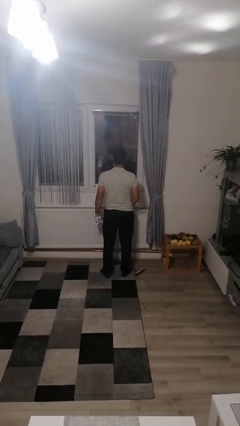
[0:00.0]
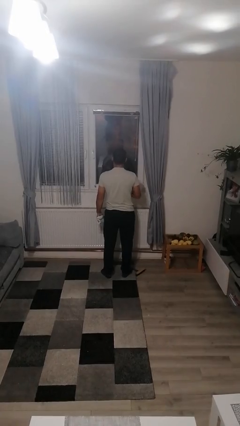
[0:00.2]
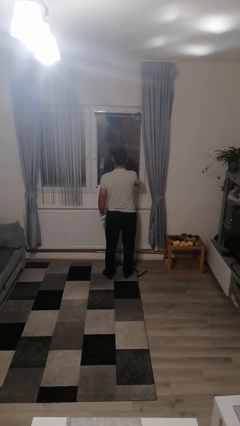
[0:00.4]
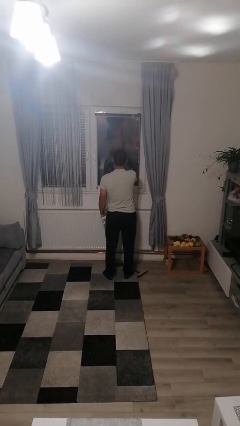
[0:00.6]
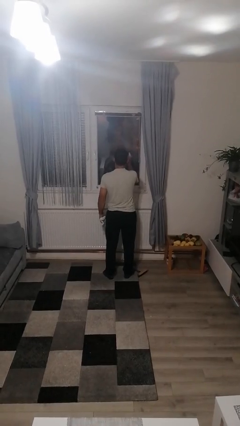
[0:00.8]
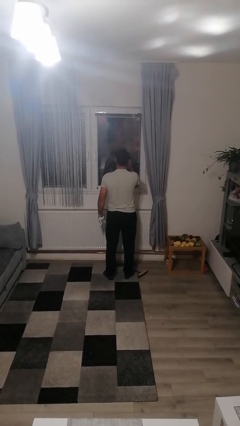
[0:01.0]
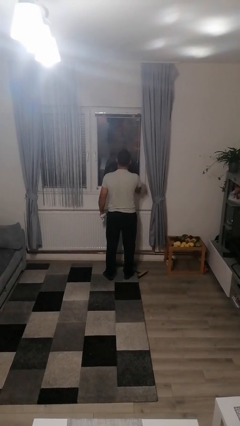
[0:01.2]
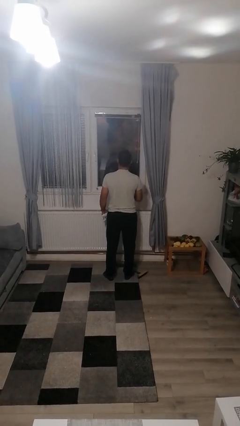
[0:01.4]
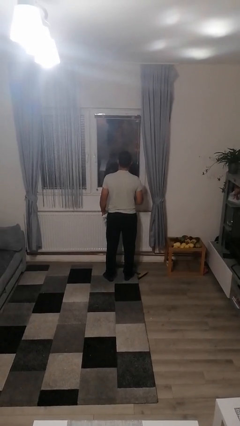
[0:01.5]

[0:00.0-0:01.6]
person sprays from bottle

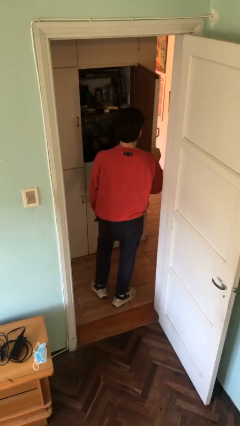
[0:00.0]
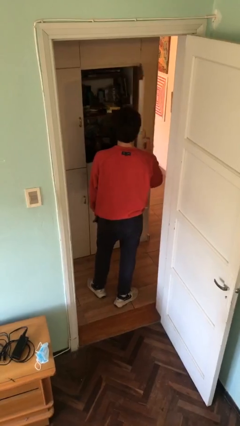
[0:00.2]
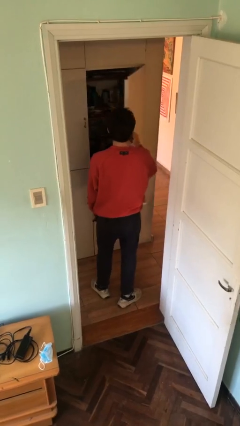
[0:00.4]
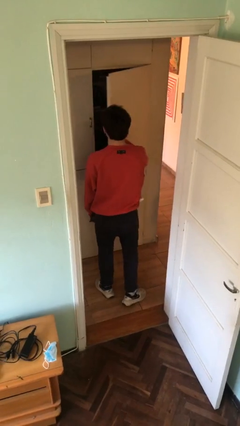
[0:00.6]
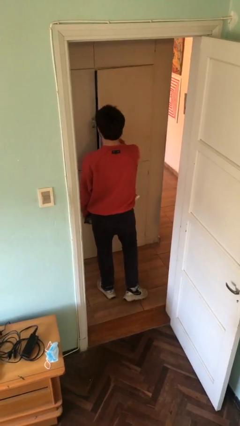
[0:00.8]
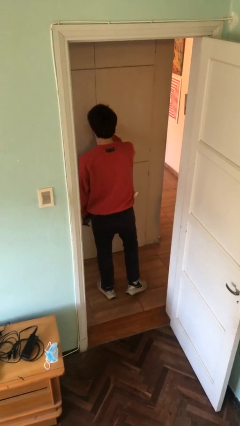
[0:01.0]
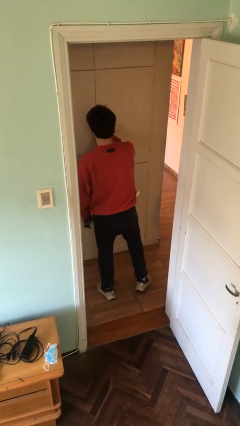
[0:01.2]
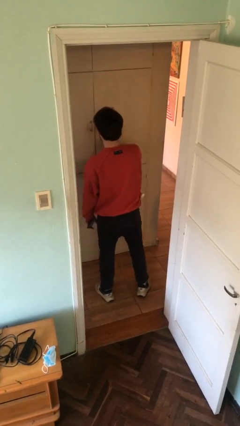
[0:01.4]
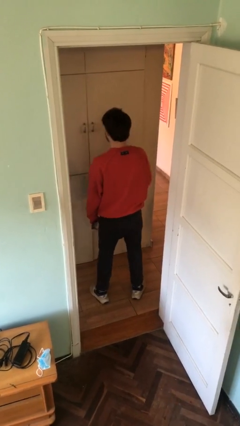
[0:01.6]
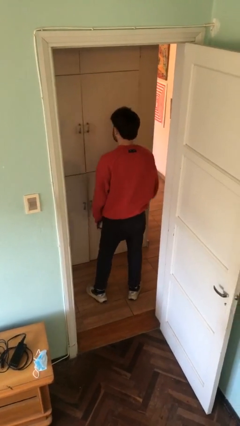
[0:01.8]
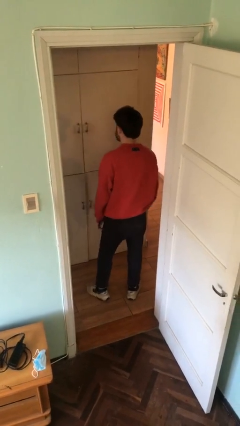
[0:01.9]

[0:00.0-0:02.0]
person closes closet door

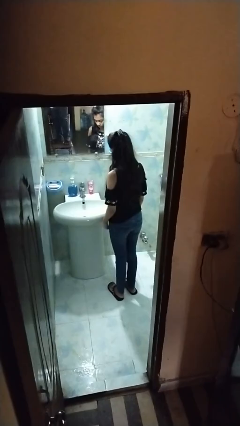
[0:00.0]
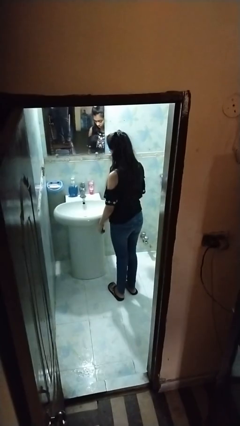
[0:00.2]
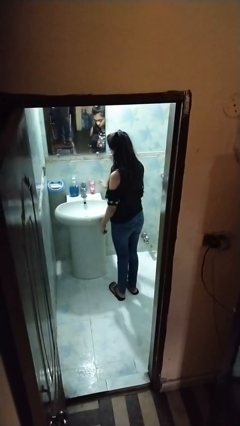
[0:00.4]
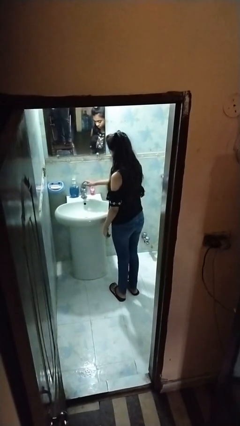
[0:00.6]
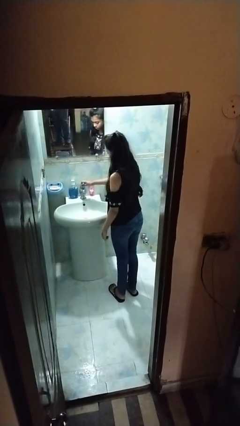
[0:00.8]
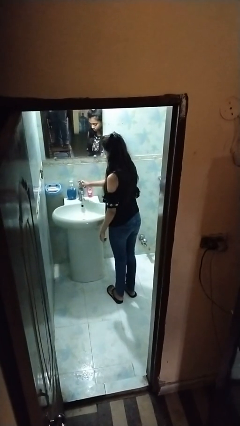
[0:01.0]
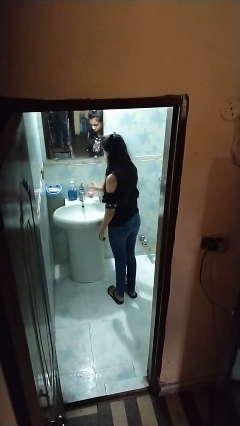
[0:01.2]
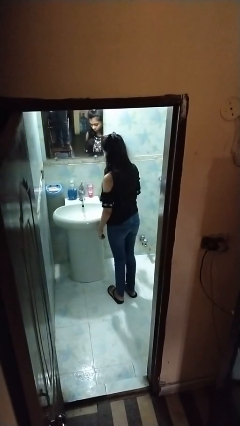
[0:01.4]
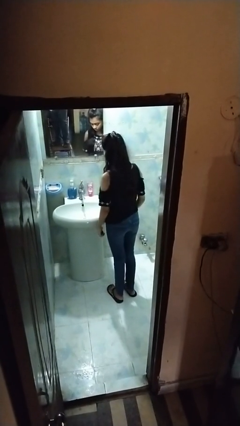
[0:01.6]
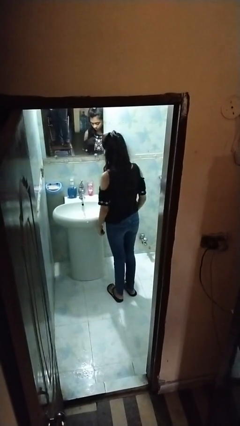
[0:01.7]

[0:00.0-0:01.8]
person turns on faucet

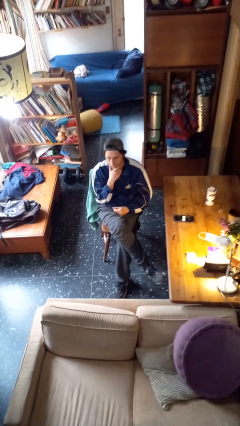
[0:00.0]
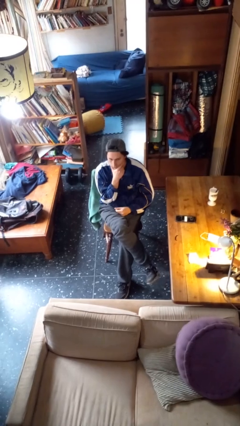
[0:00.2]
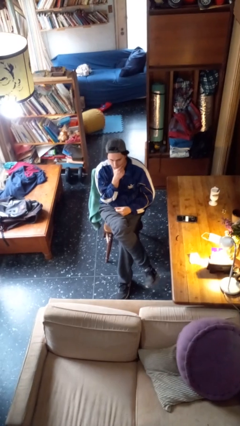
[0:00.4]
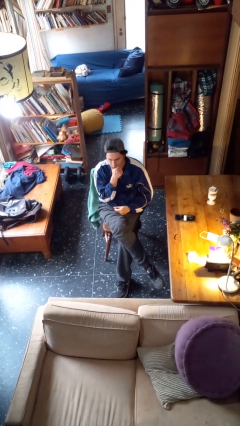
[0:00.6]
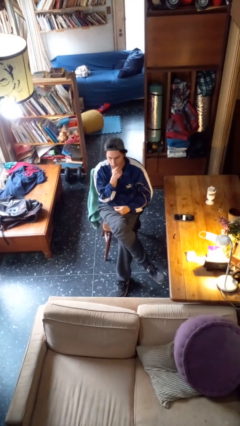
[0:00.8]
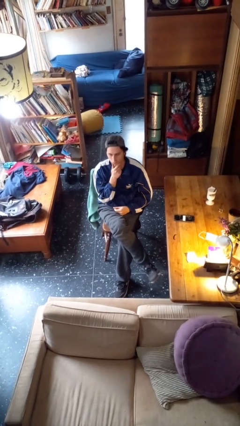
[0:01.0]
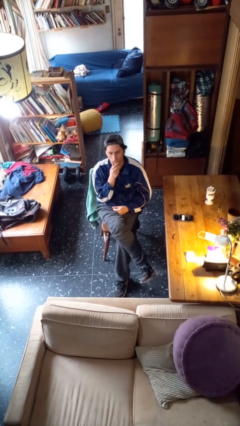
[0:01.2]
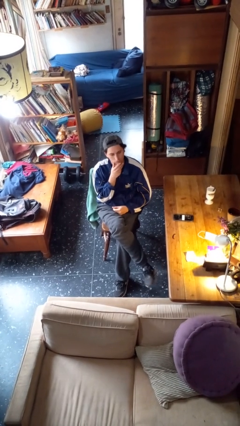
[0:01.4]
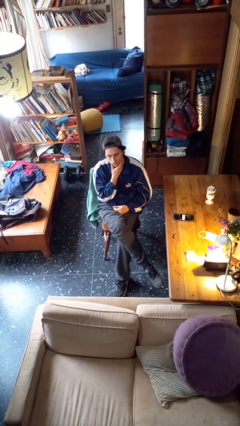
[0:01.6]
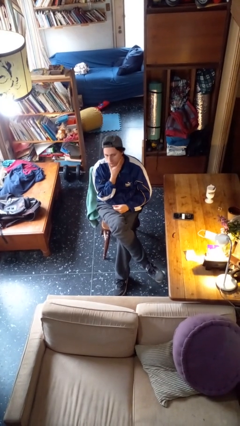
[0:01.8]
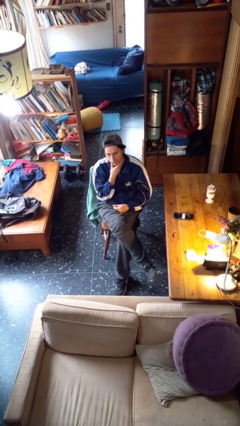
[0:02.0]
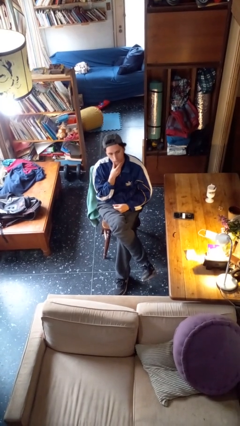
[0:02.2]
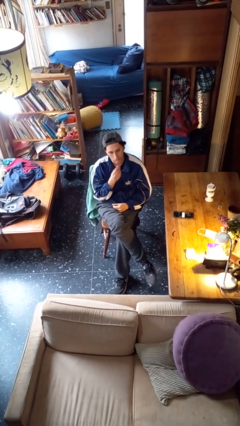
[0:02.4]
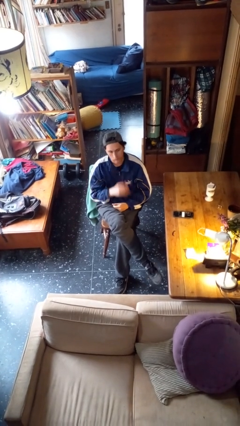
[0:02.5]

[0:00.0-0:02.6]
person strokes chin

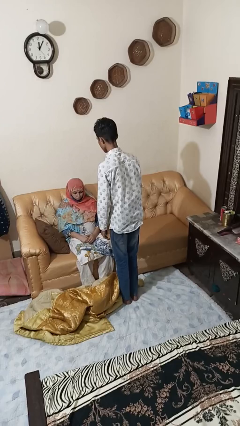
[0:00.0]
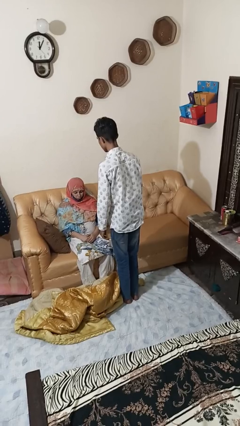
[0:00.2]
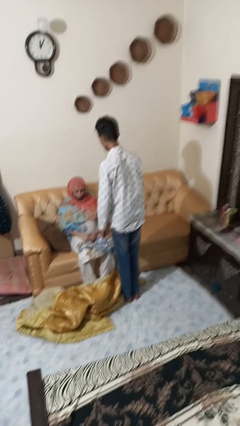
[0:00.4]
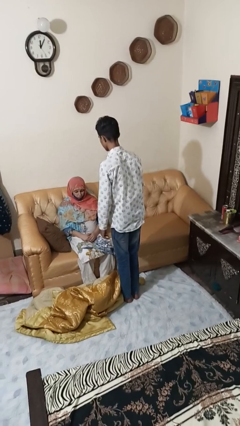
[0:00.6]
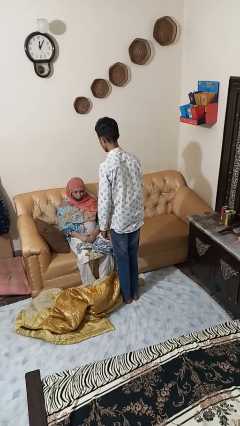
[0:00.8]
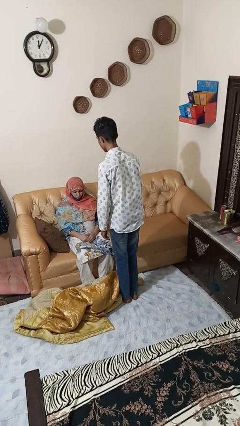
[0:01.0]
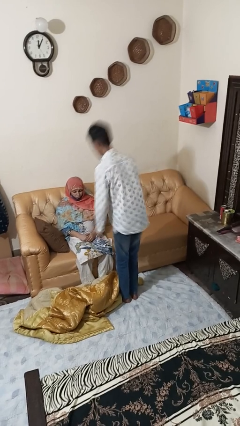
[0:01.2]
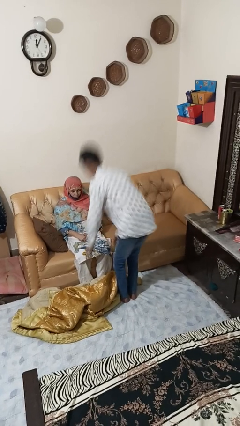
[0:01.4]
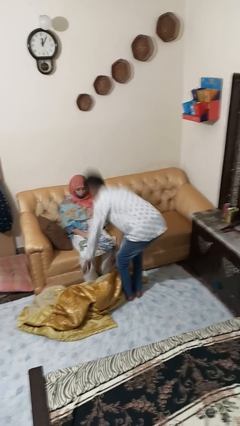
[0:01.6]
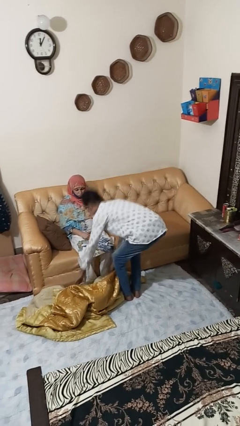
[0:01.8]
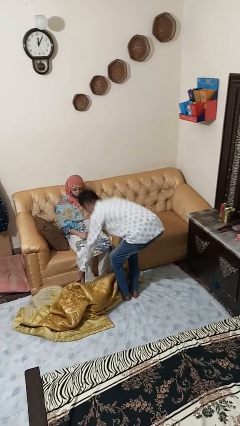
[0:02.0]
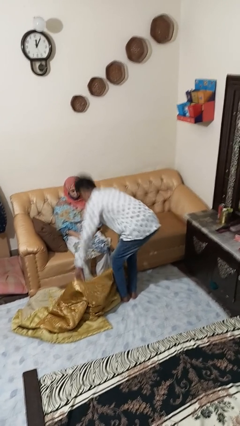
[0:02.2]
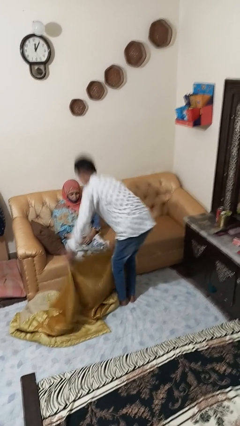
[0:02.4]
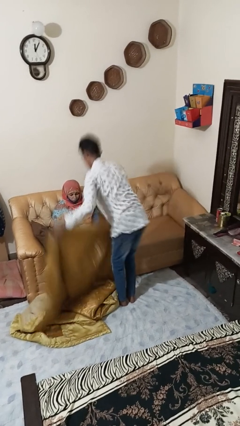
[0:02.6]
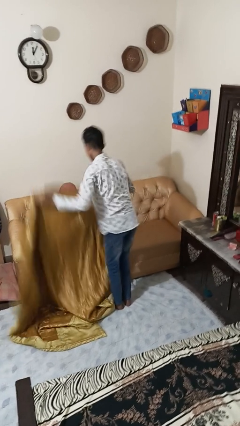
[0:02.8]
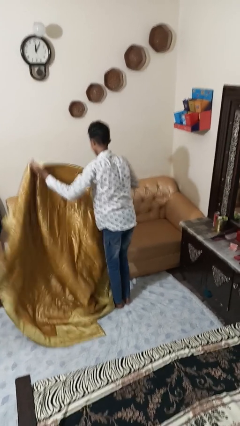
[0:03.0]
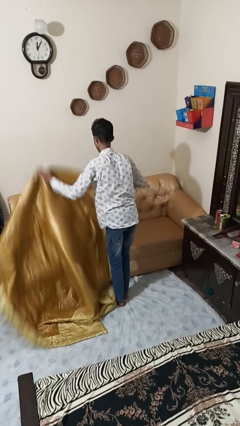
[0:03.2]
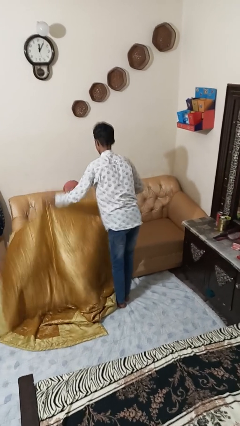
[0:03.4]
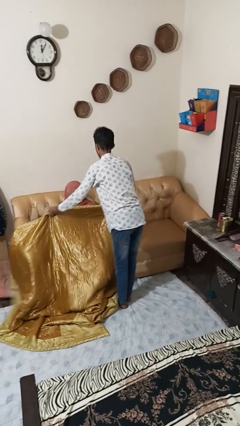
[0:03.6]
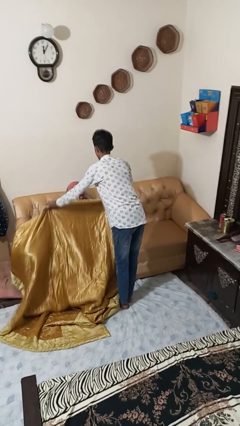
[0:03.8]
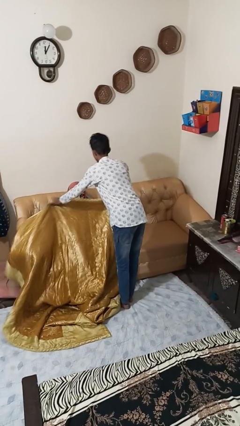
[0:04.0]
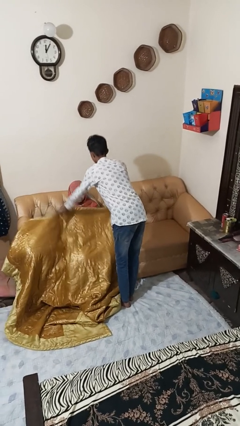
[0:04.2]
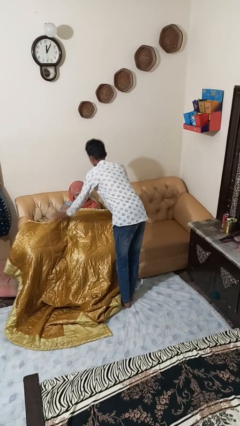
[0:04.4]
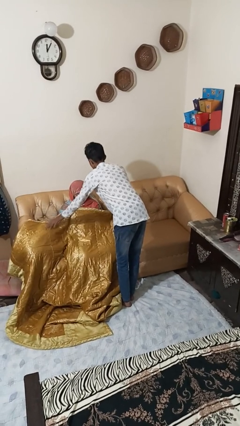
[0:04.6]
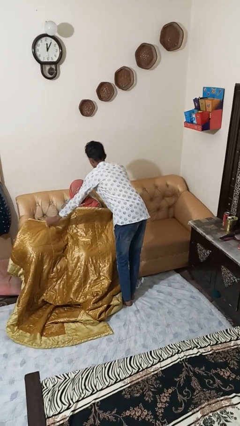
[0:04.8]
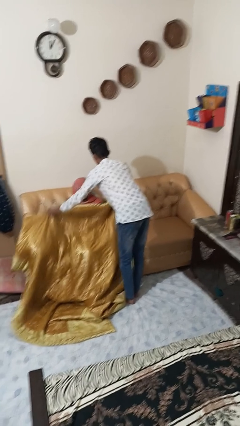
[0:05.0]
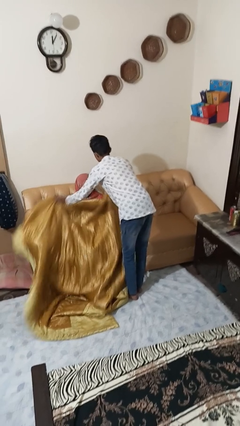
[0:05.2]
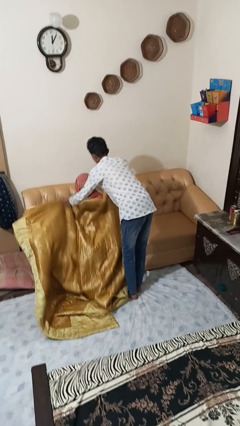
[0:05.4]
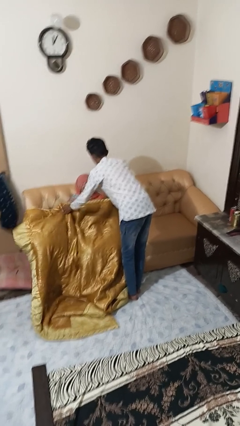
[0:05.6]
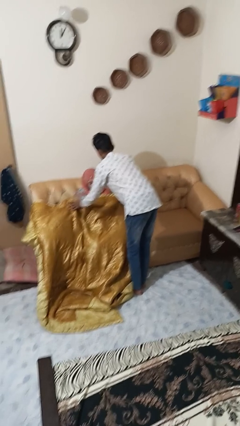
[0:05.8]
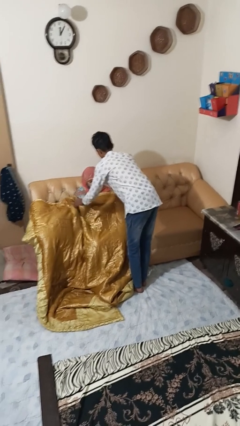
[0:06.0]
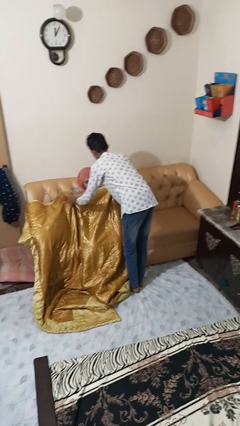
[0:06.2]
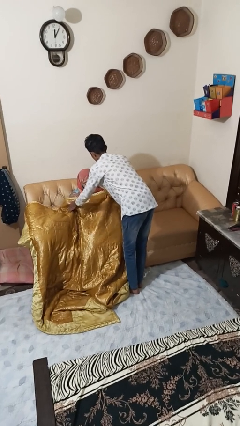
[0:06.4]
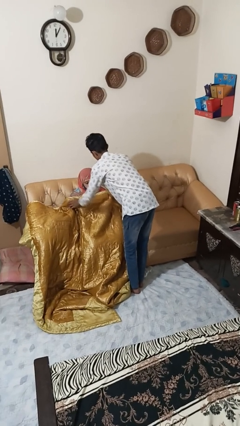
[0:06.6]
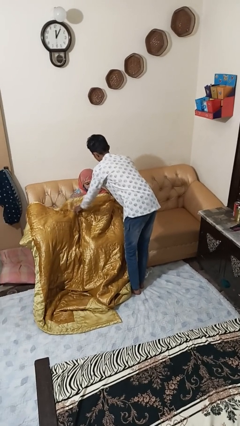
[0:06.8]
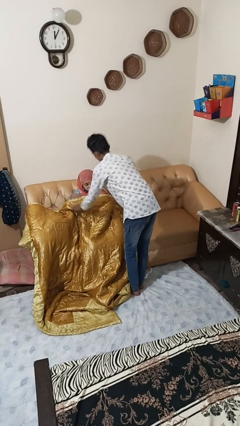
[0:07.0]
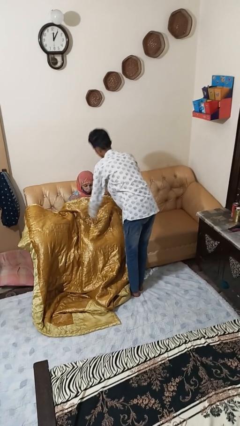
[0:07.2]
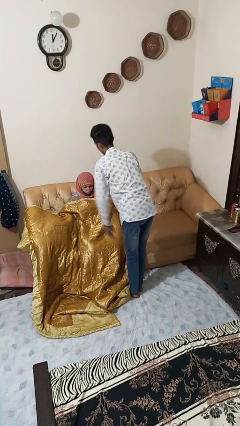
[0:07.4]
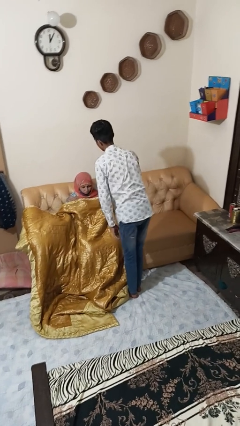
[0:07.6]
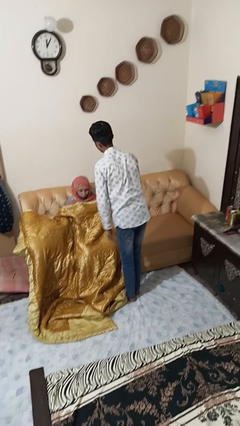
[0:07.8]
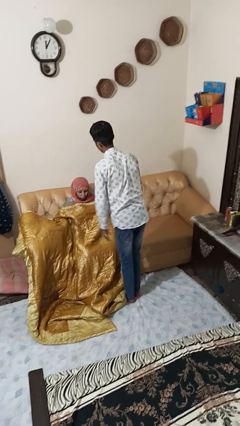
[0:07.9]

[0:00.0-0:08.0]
person covers friend with blanket

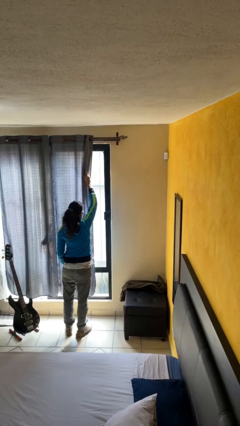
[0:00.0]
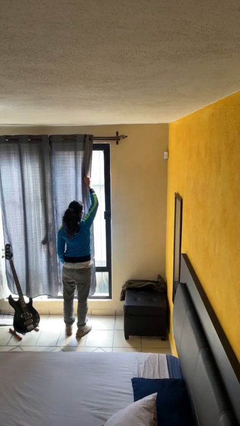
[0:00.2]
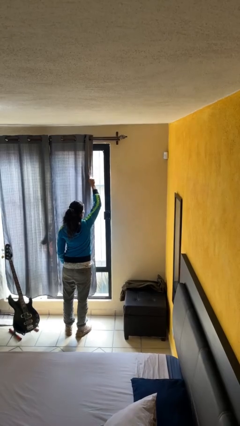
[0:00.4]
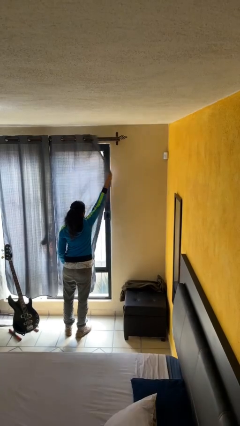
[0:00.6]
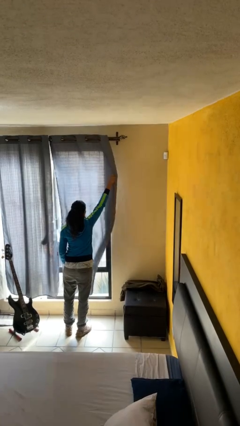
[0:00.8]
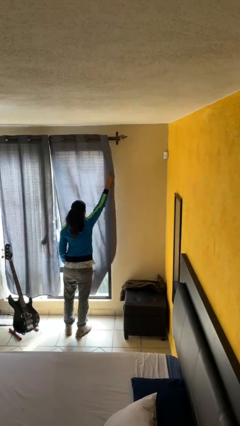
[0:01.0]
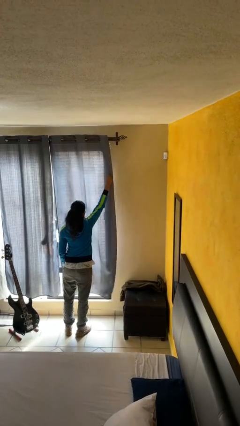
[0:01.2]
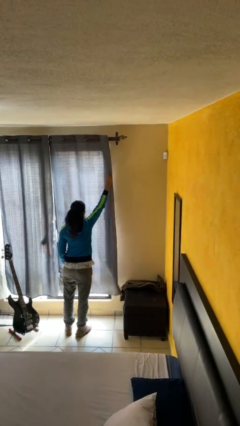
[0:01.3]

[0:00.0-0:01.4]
person closes curtains
